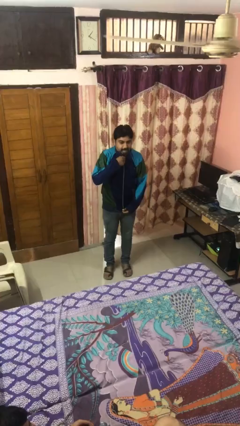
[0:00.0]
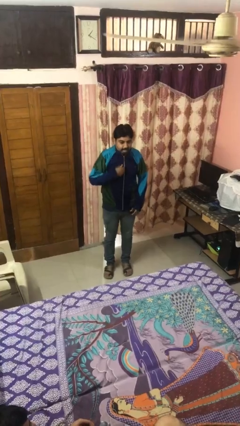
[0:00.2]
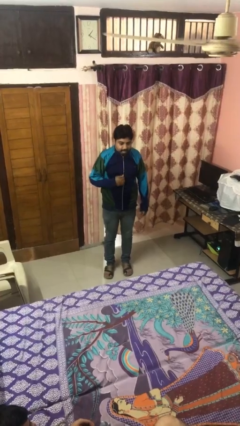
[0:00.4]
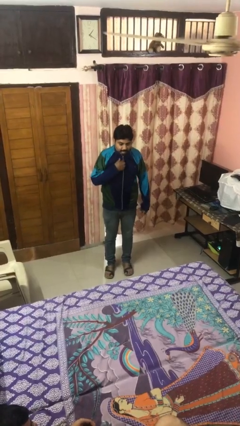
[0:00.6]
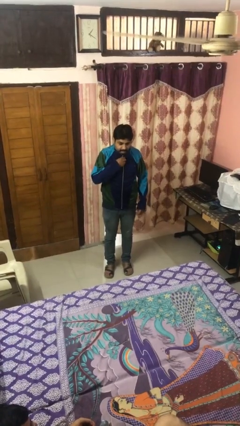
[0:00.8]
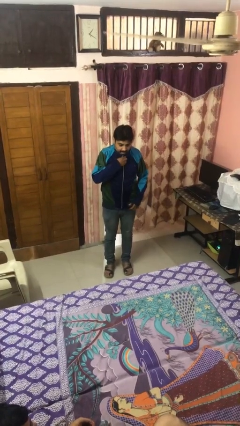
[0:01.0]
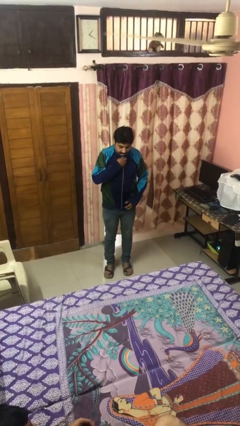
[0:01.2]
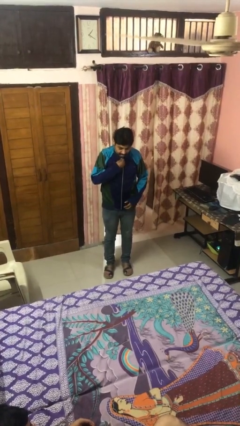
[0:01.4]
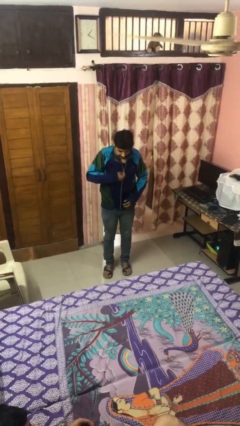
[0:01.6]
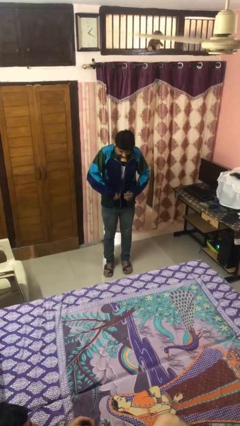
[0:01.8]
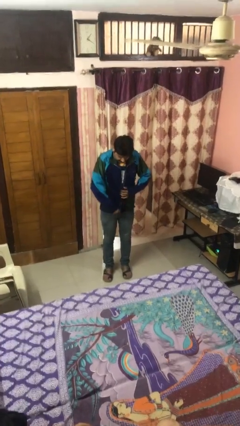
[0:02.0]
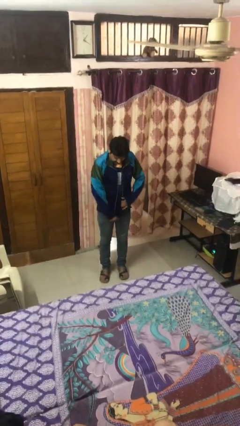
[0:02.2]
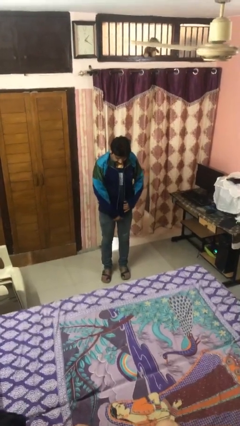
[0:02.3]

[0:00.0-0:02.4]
person unzips jacket

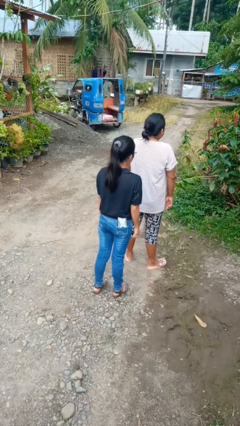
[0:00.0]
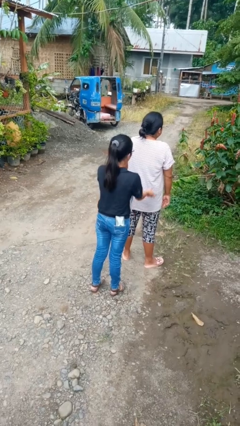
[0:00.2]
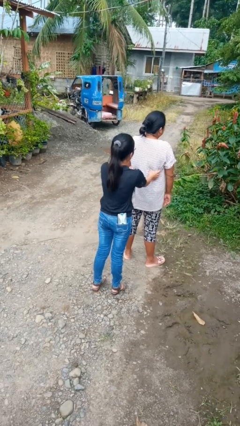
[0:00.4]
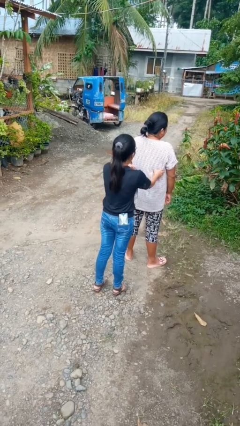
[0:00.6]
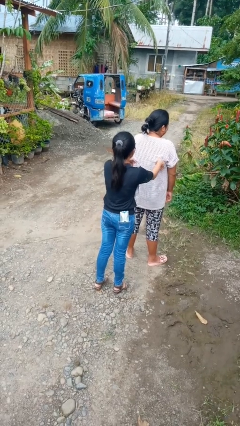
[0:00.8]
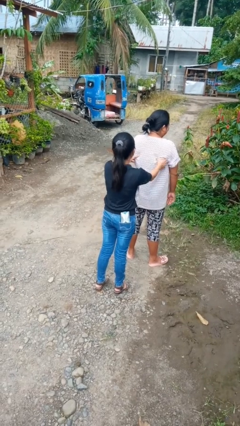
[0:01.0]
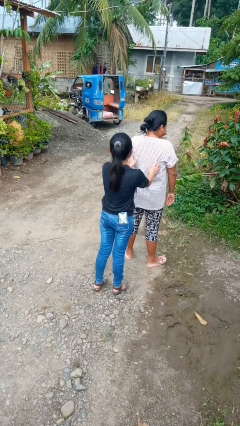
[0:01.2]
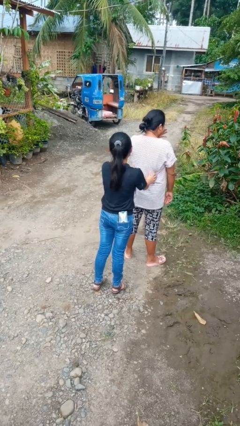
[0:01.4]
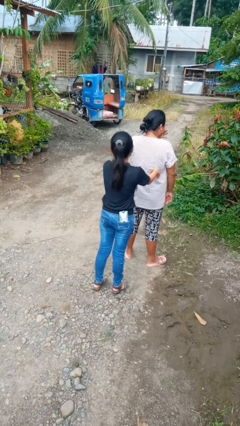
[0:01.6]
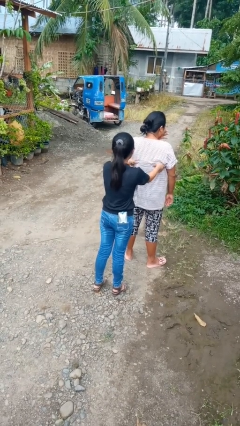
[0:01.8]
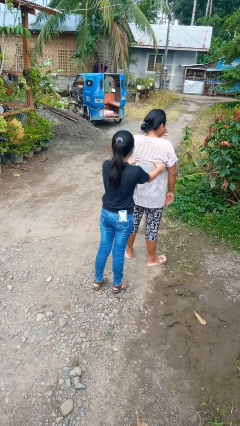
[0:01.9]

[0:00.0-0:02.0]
person tickles person

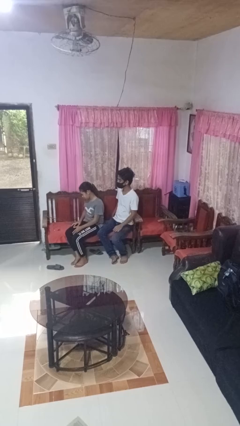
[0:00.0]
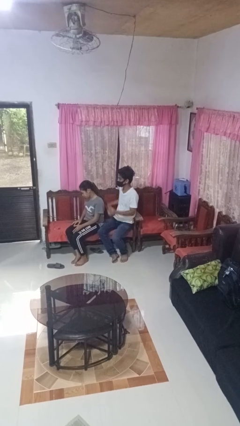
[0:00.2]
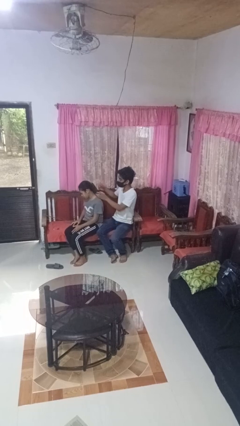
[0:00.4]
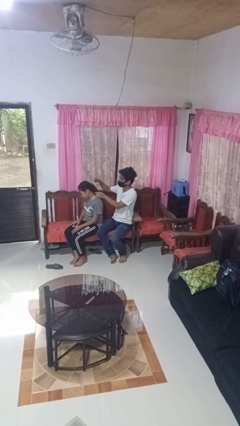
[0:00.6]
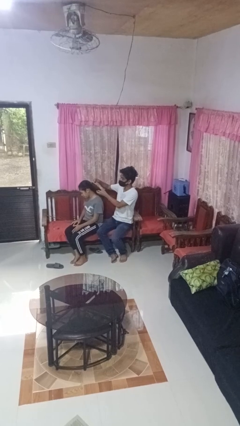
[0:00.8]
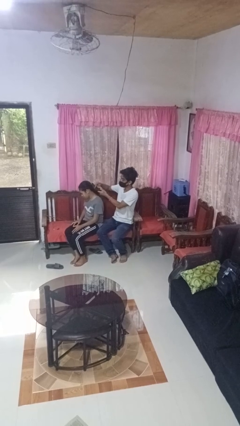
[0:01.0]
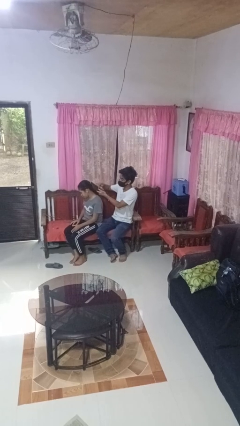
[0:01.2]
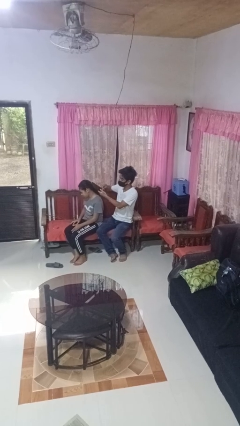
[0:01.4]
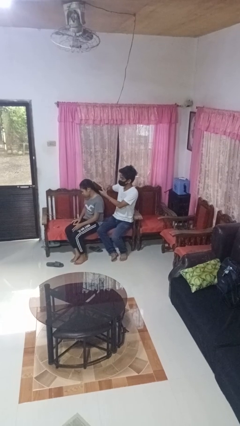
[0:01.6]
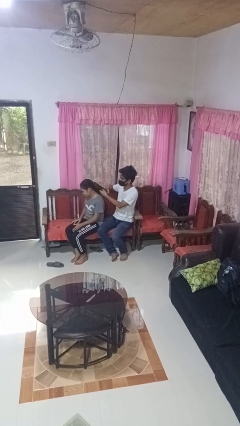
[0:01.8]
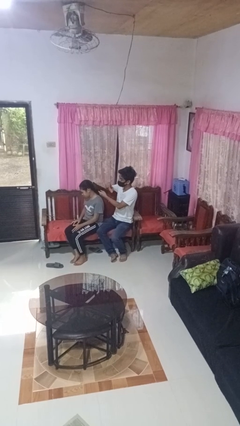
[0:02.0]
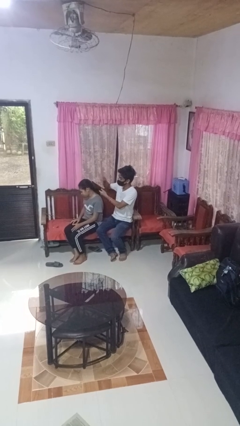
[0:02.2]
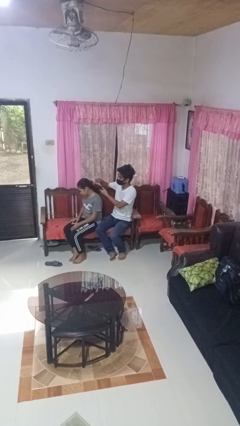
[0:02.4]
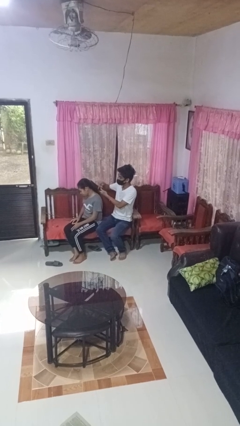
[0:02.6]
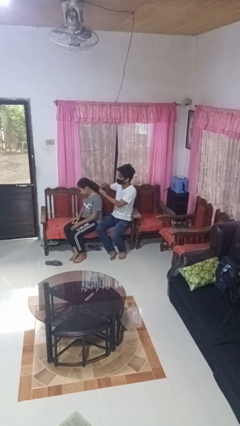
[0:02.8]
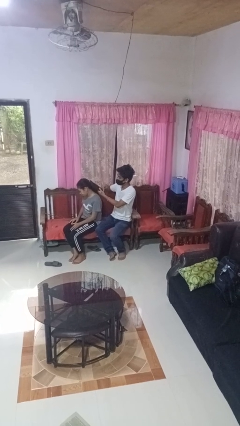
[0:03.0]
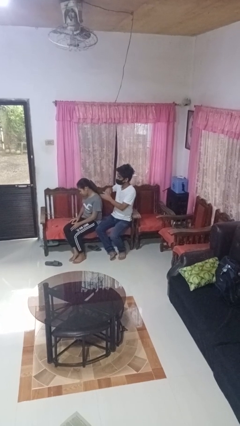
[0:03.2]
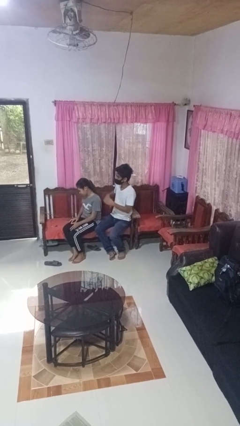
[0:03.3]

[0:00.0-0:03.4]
person brushes hair of person

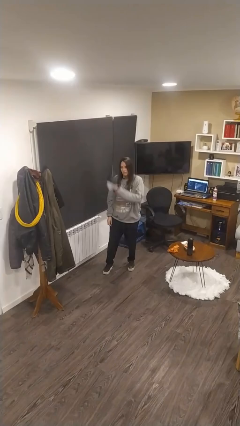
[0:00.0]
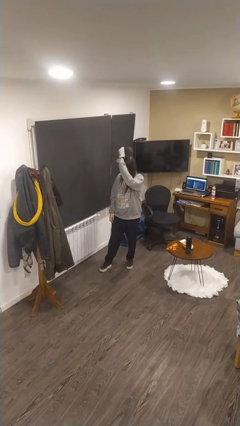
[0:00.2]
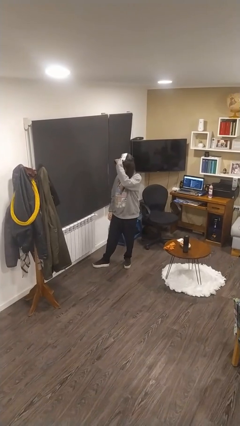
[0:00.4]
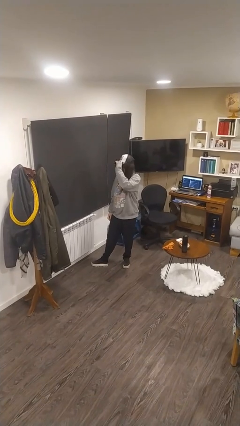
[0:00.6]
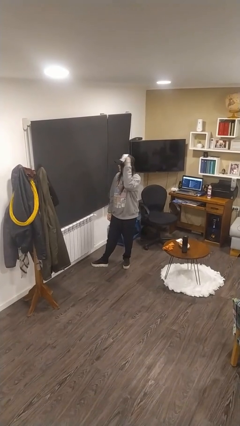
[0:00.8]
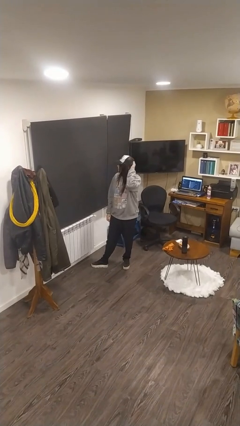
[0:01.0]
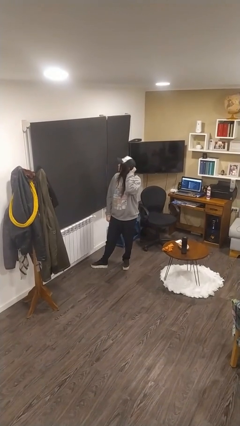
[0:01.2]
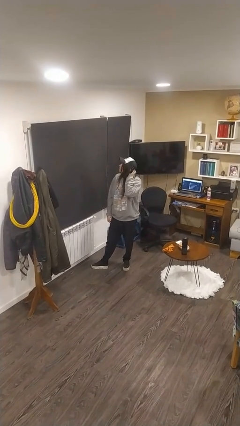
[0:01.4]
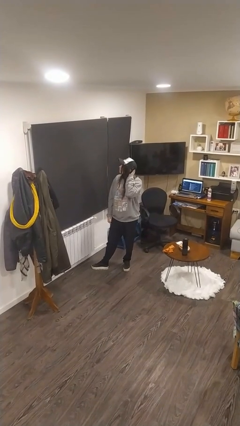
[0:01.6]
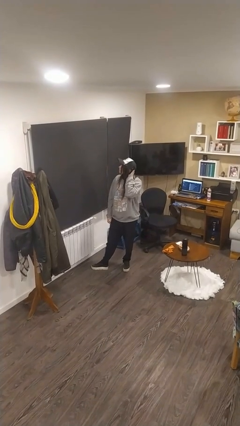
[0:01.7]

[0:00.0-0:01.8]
person puts on hat

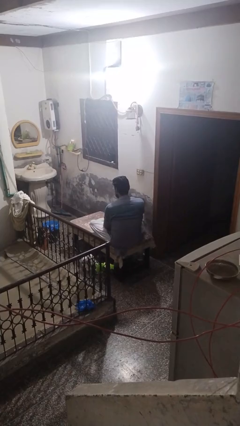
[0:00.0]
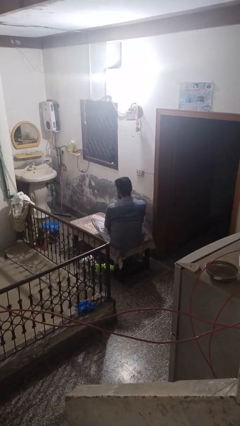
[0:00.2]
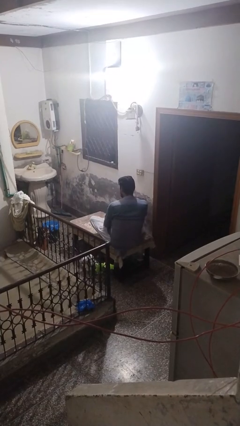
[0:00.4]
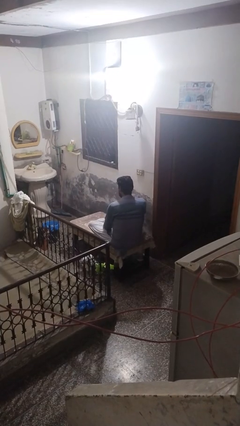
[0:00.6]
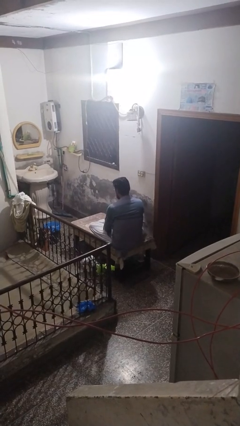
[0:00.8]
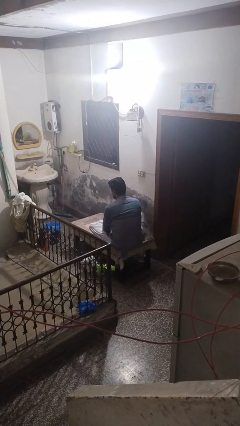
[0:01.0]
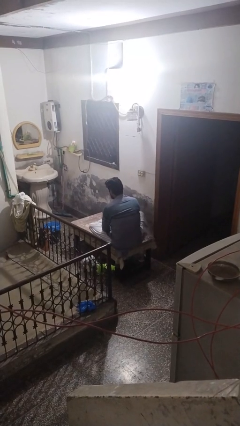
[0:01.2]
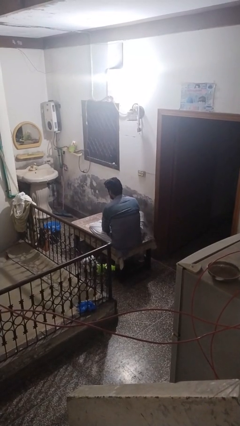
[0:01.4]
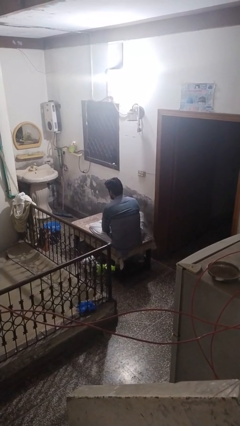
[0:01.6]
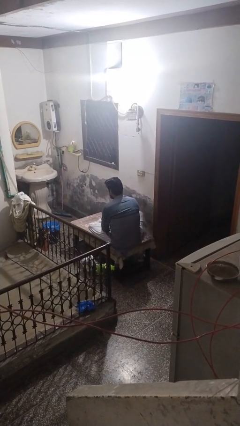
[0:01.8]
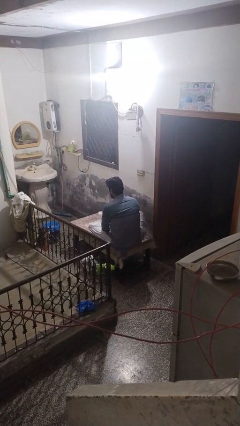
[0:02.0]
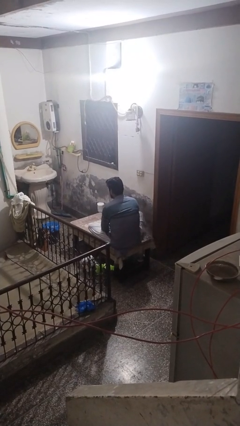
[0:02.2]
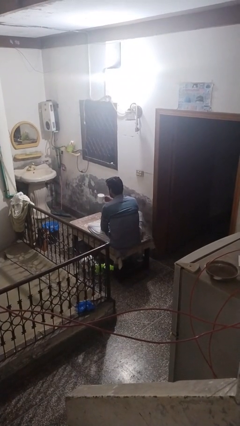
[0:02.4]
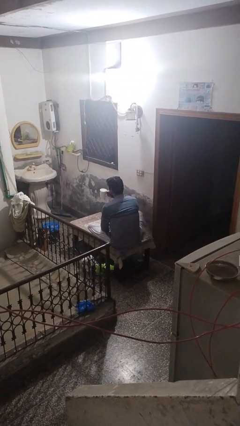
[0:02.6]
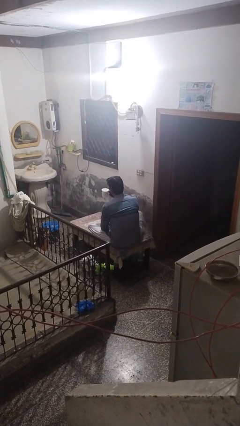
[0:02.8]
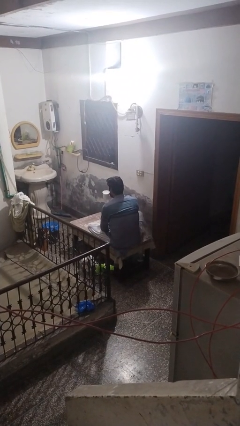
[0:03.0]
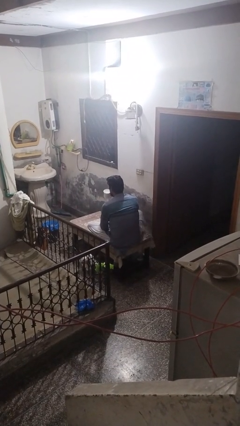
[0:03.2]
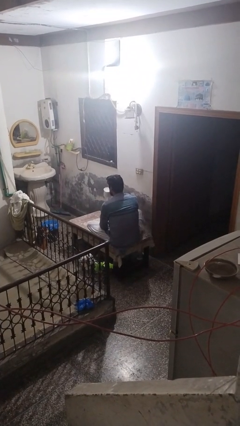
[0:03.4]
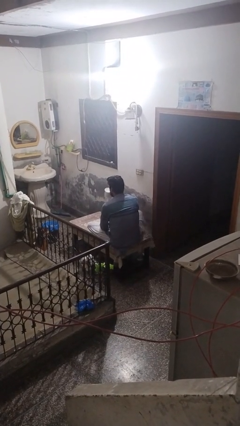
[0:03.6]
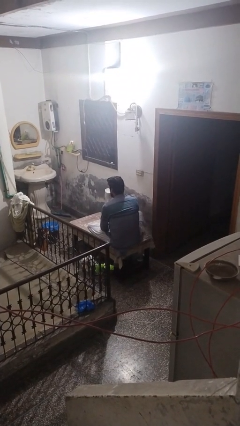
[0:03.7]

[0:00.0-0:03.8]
person picks up object from table

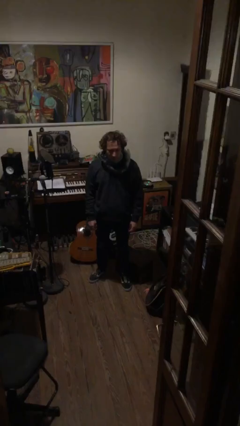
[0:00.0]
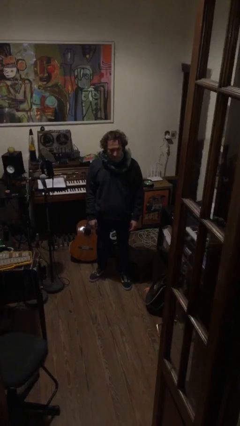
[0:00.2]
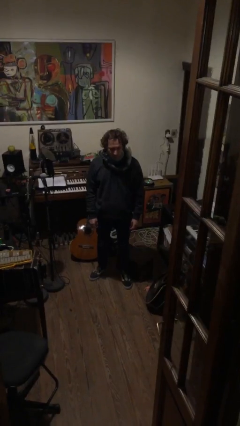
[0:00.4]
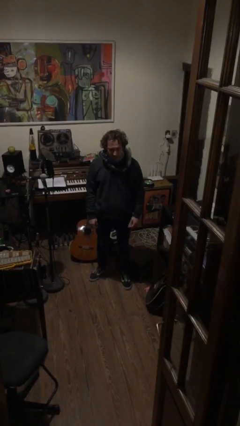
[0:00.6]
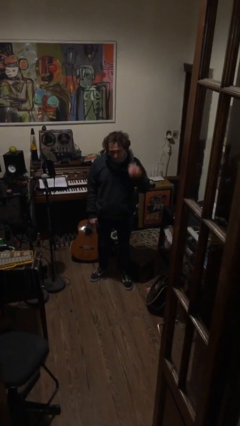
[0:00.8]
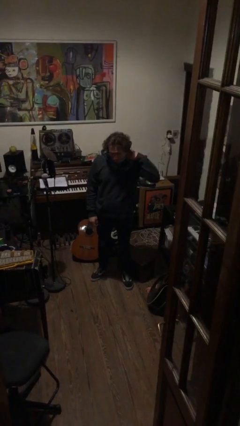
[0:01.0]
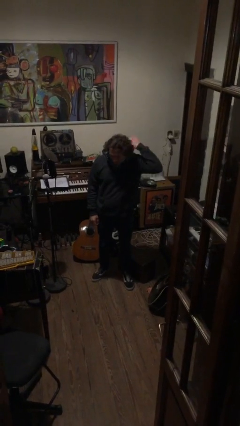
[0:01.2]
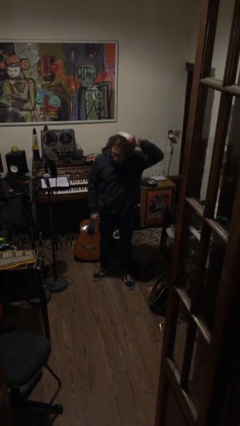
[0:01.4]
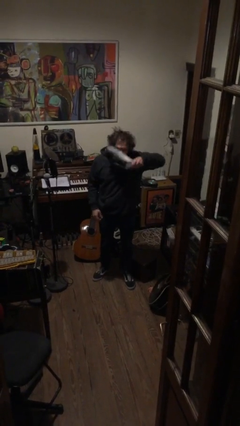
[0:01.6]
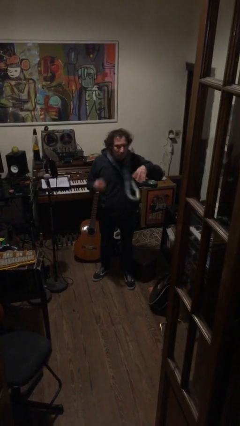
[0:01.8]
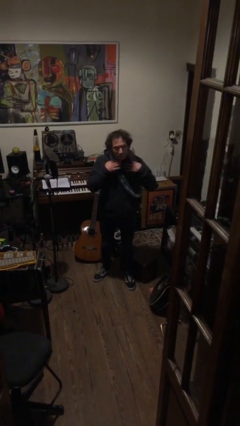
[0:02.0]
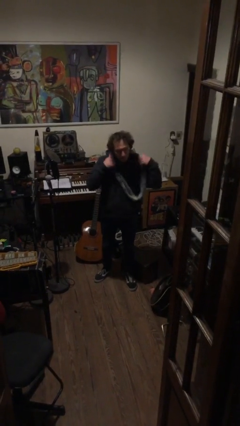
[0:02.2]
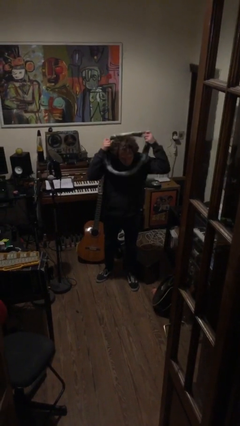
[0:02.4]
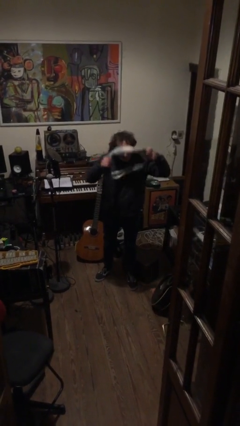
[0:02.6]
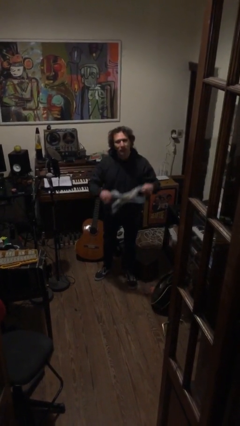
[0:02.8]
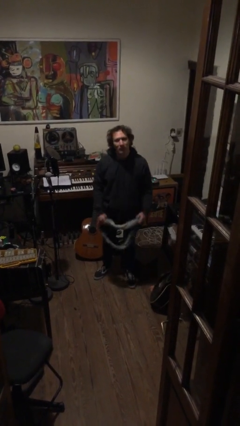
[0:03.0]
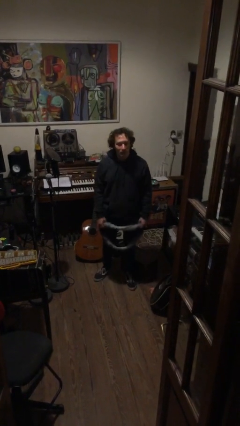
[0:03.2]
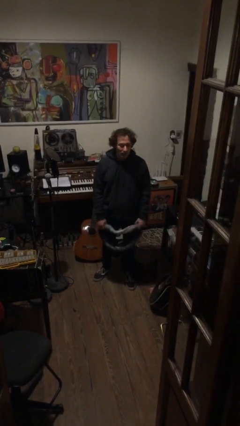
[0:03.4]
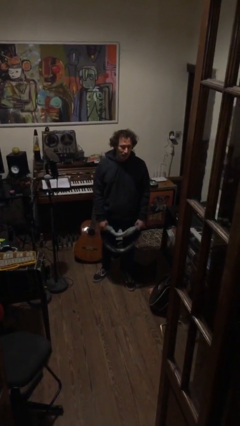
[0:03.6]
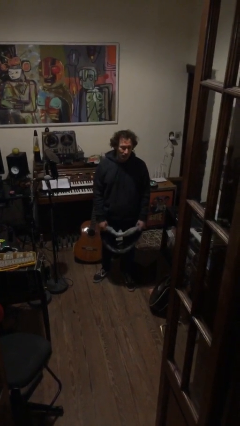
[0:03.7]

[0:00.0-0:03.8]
person takes off scarf
